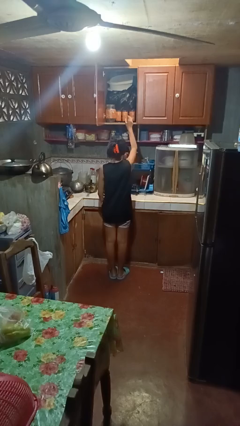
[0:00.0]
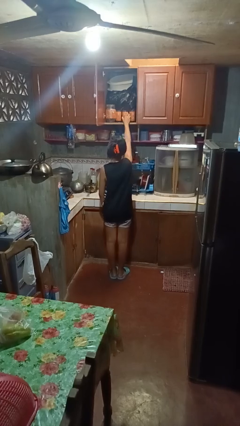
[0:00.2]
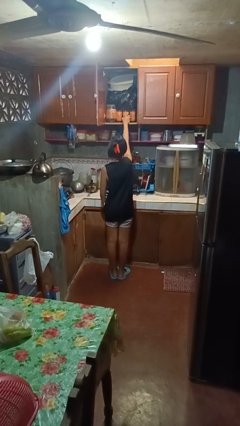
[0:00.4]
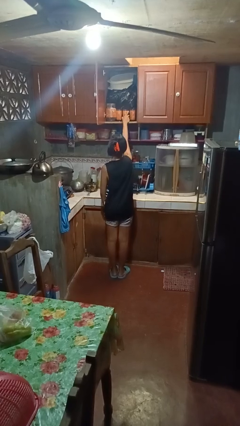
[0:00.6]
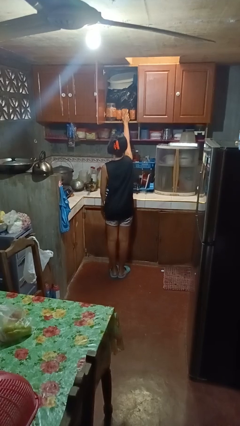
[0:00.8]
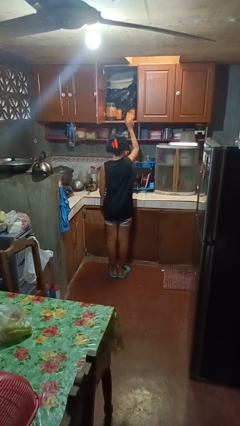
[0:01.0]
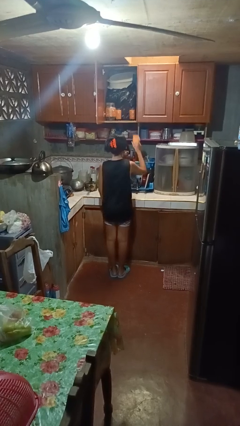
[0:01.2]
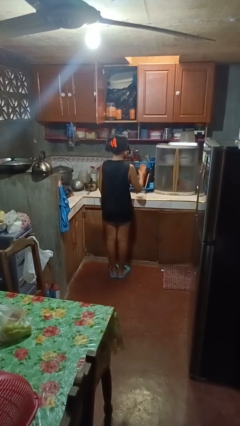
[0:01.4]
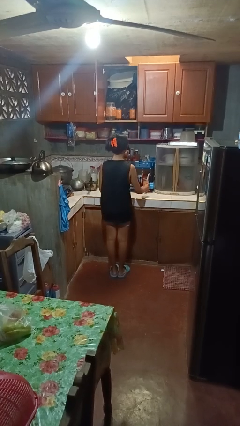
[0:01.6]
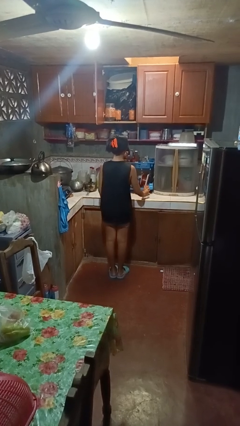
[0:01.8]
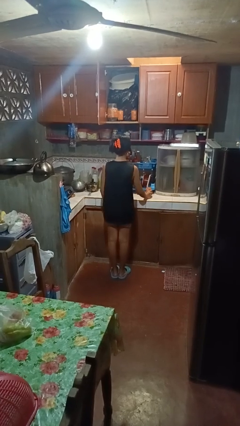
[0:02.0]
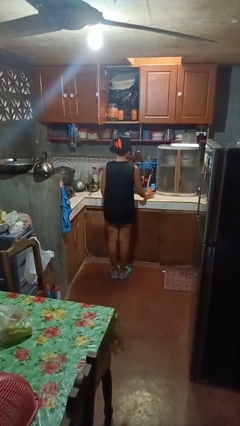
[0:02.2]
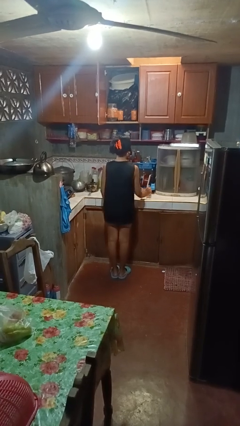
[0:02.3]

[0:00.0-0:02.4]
person takes object from cabinet

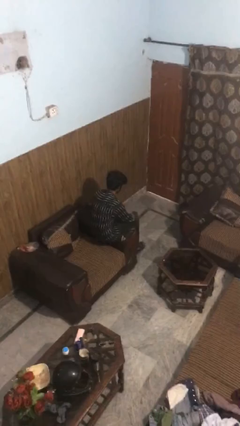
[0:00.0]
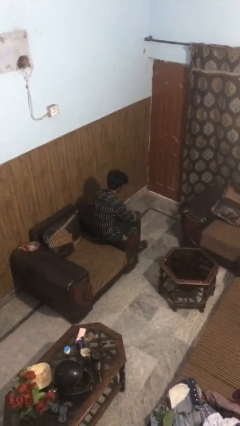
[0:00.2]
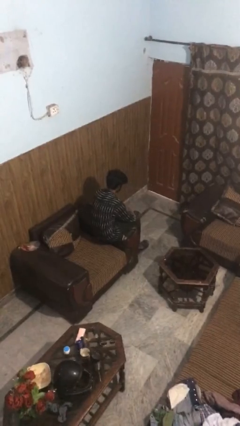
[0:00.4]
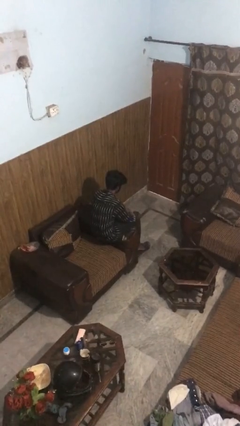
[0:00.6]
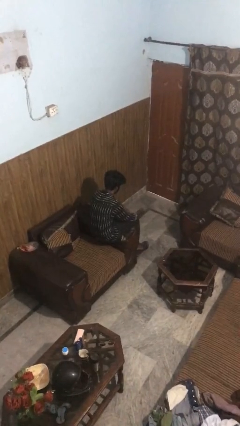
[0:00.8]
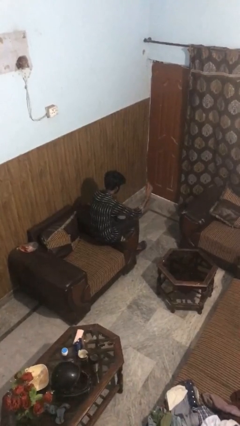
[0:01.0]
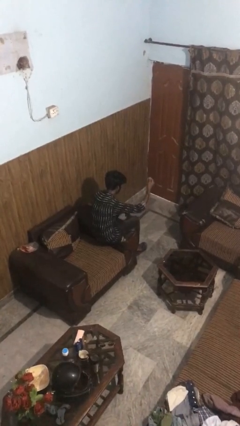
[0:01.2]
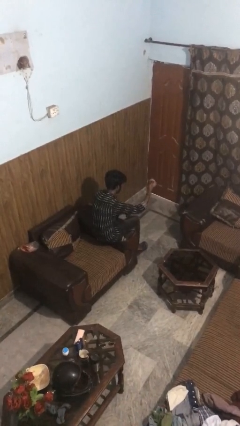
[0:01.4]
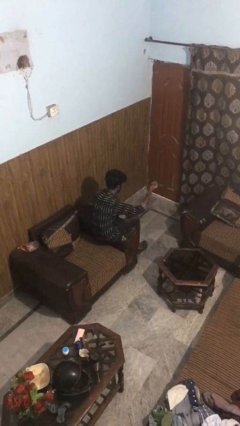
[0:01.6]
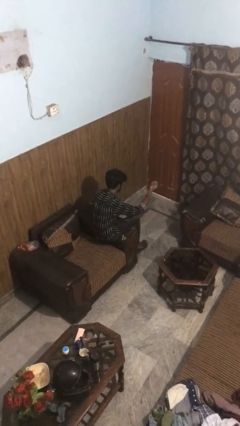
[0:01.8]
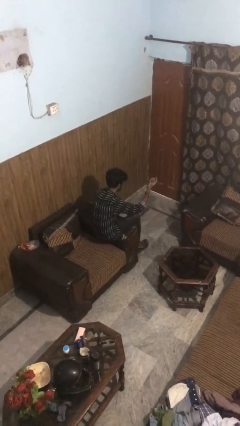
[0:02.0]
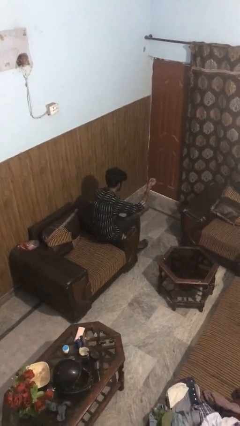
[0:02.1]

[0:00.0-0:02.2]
person snaps fingers

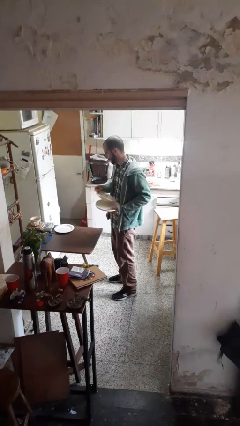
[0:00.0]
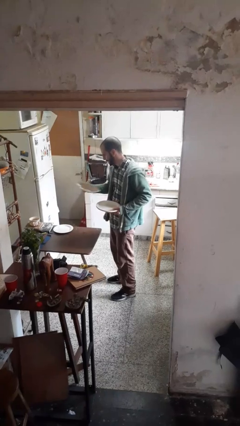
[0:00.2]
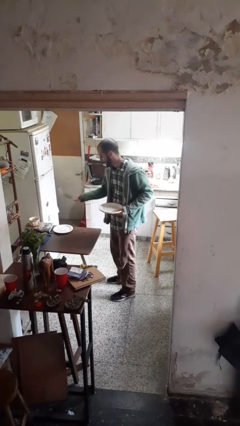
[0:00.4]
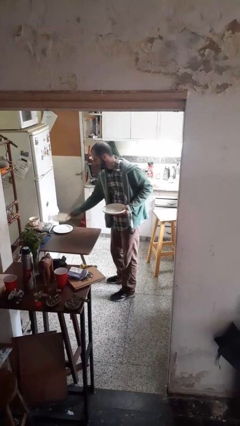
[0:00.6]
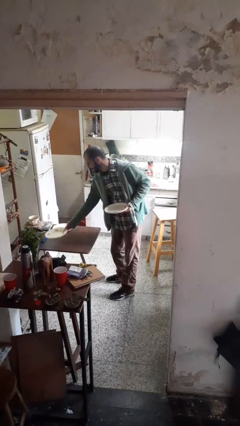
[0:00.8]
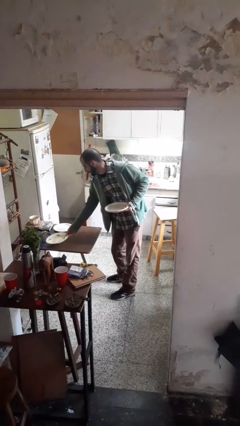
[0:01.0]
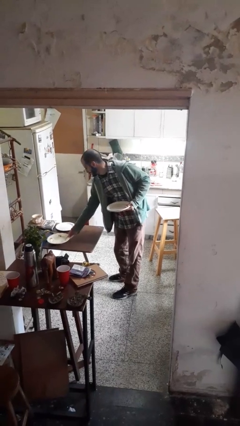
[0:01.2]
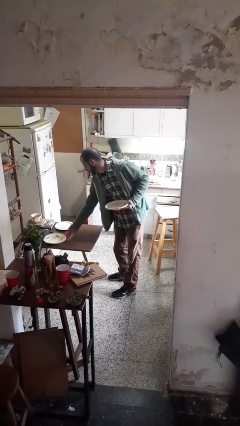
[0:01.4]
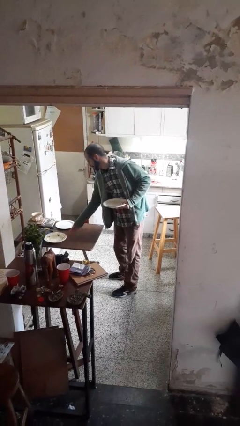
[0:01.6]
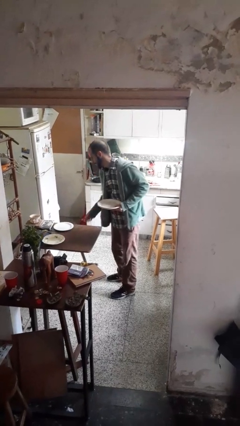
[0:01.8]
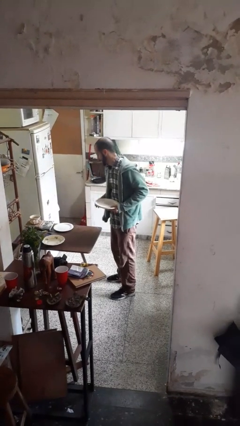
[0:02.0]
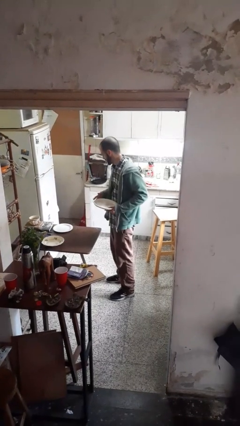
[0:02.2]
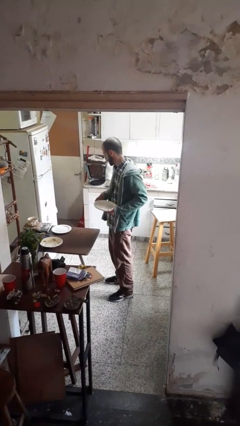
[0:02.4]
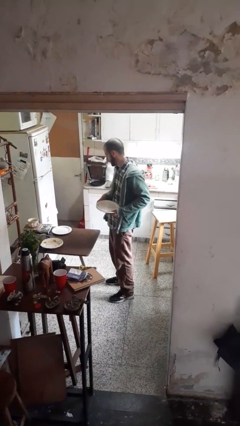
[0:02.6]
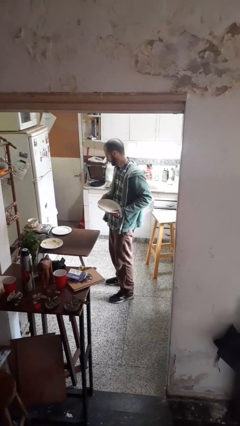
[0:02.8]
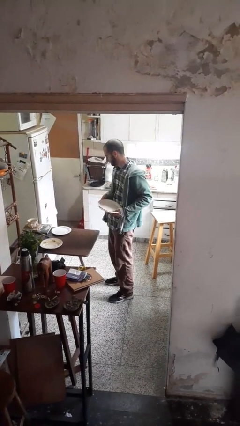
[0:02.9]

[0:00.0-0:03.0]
person sets table

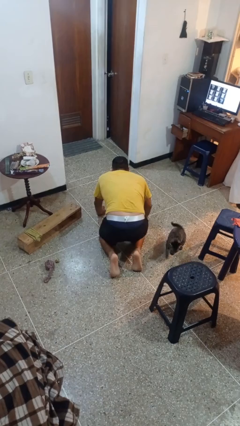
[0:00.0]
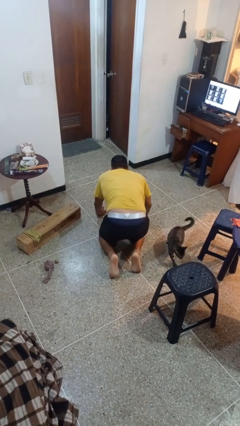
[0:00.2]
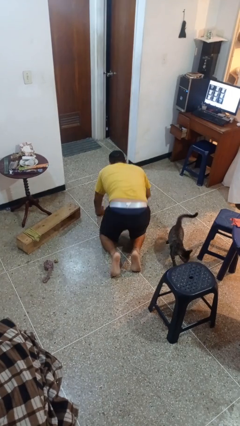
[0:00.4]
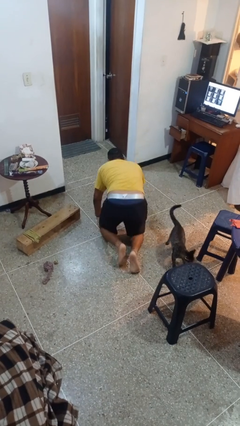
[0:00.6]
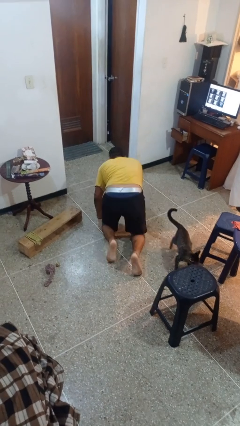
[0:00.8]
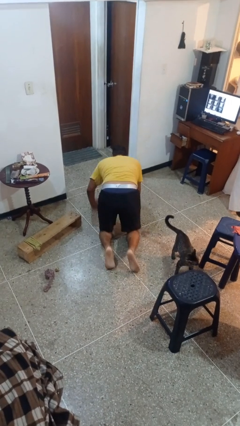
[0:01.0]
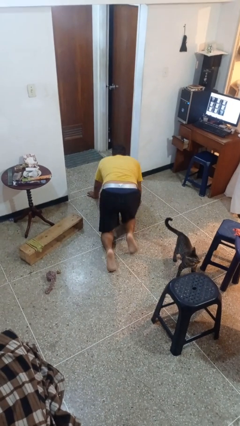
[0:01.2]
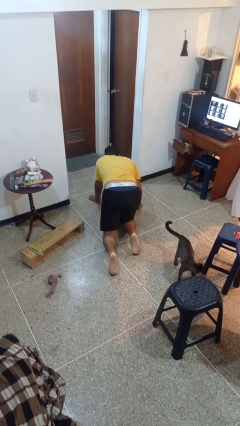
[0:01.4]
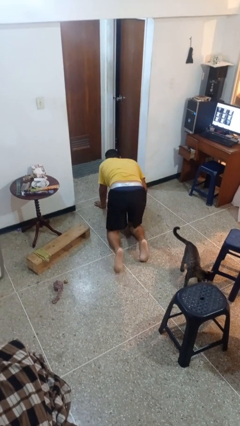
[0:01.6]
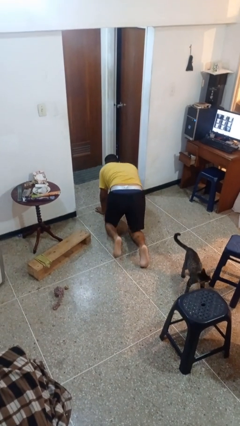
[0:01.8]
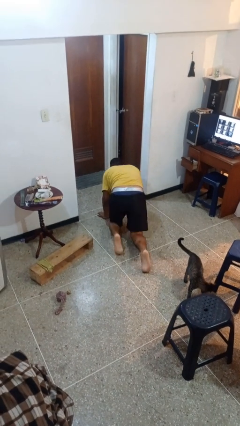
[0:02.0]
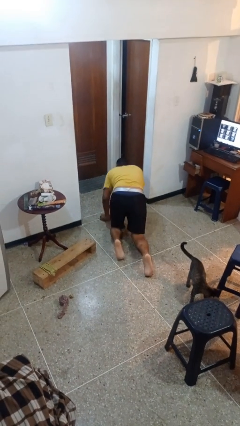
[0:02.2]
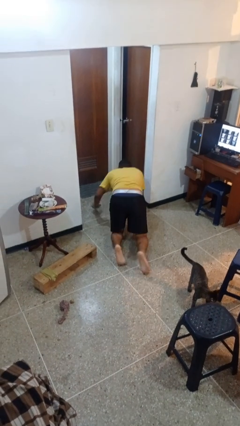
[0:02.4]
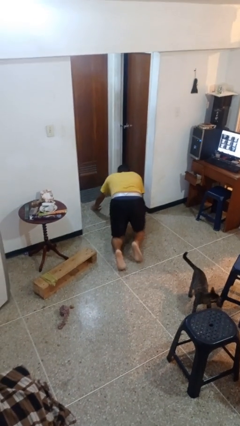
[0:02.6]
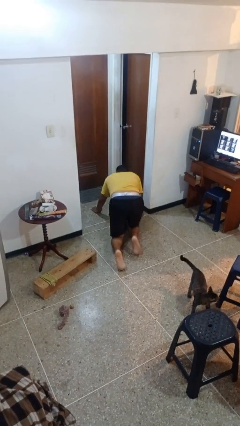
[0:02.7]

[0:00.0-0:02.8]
person crawls

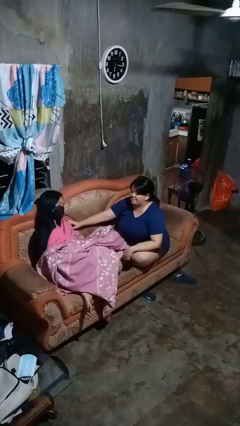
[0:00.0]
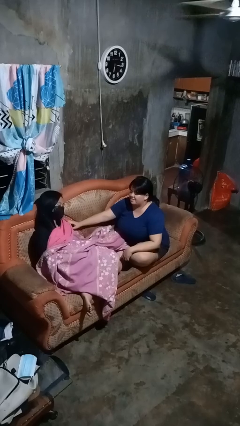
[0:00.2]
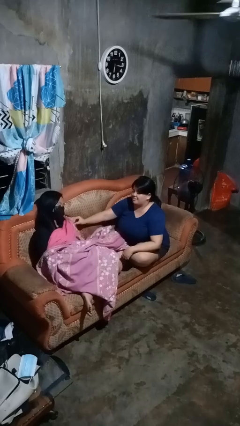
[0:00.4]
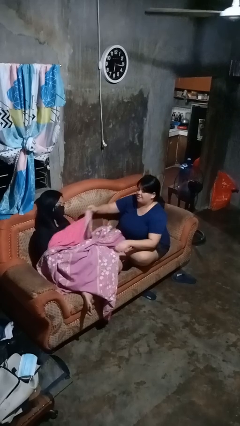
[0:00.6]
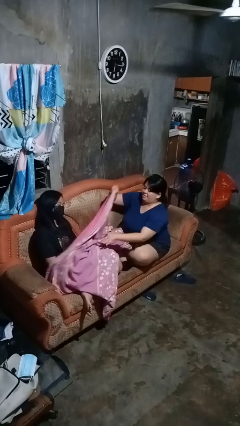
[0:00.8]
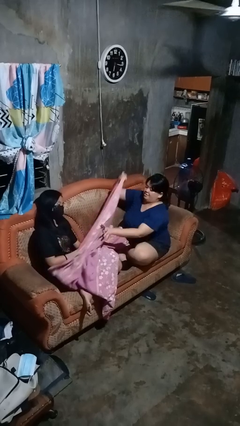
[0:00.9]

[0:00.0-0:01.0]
person uncovers friend with blanket

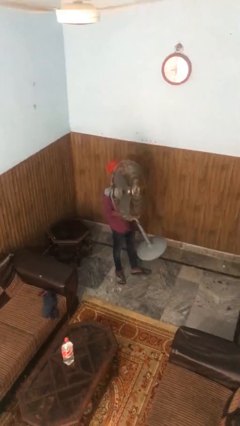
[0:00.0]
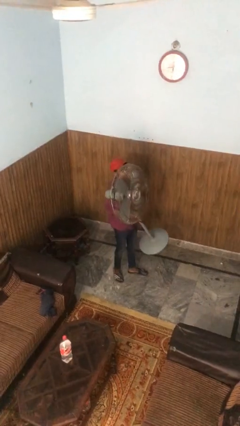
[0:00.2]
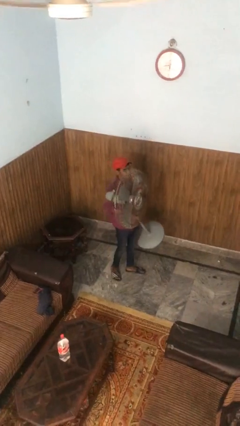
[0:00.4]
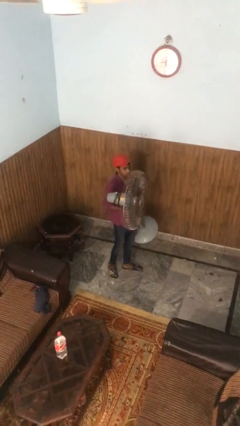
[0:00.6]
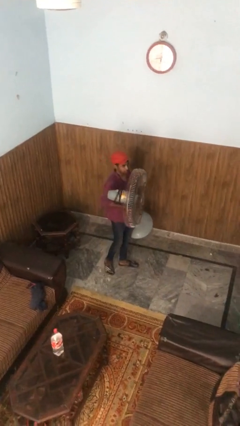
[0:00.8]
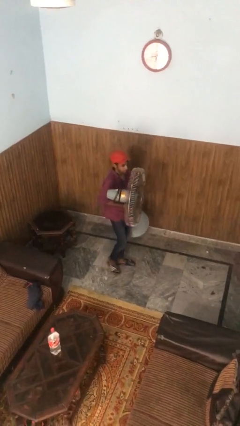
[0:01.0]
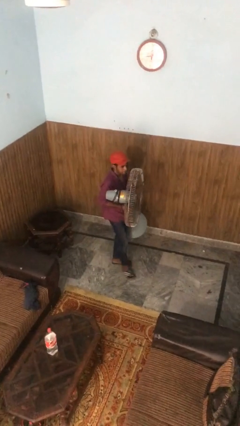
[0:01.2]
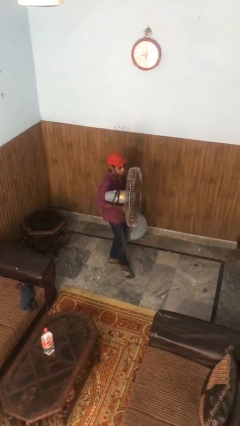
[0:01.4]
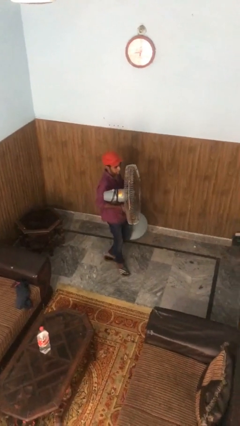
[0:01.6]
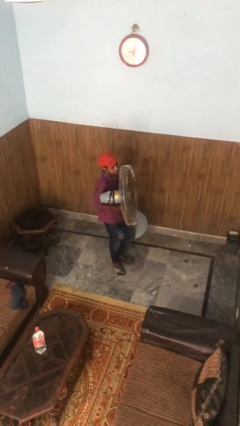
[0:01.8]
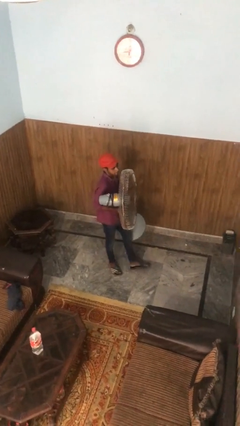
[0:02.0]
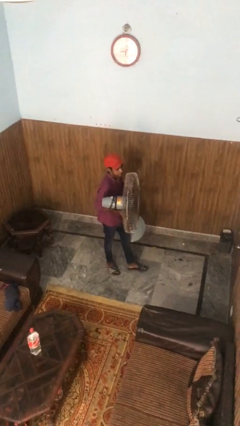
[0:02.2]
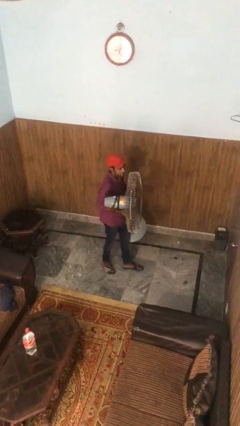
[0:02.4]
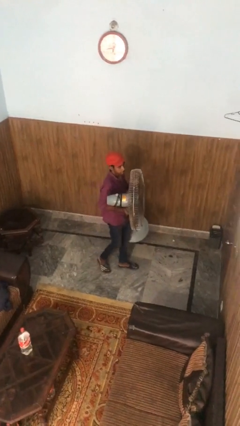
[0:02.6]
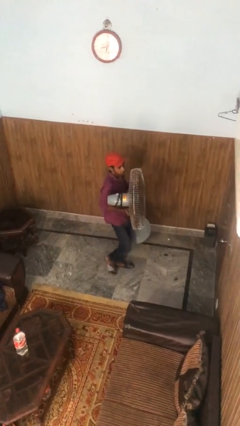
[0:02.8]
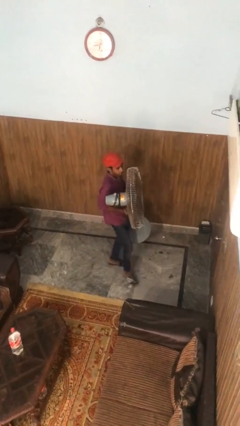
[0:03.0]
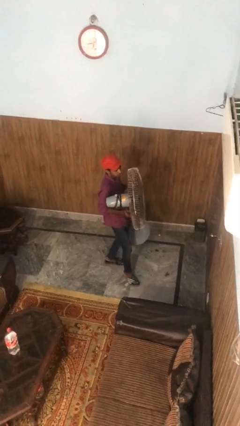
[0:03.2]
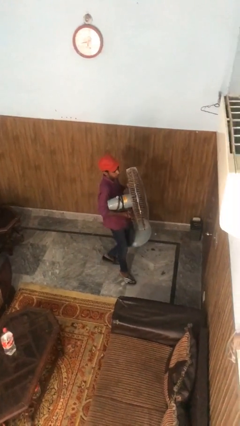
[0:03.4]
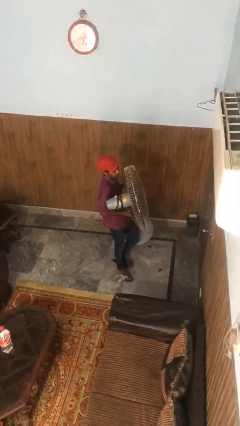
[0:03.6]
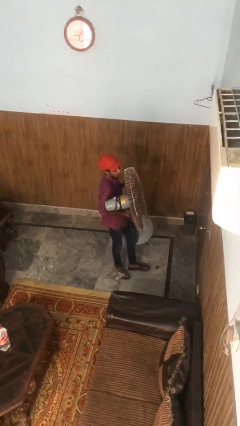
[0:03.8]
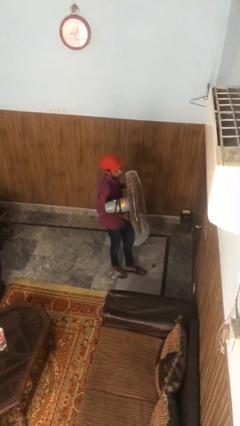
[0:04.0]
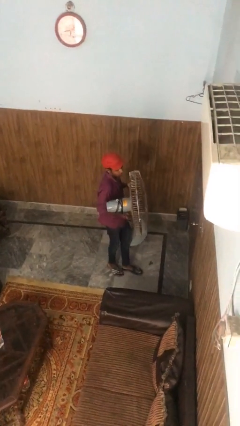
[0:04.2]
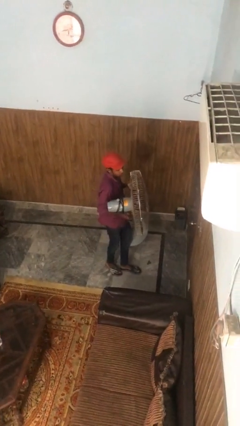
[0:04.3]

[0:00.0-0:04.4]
person carries heavy object

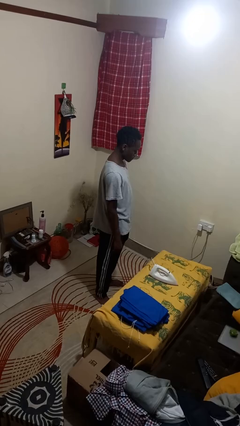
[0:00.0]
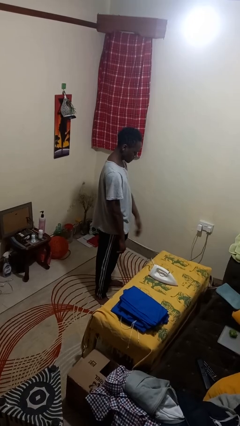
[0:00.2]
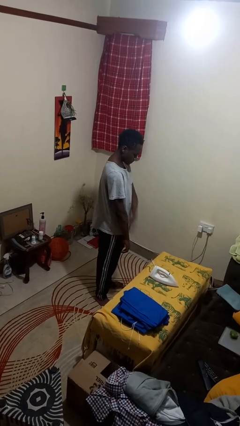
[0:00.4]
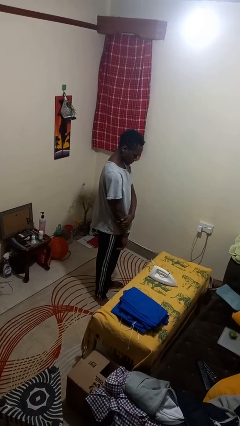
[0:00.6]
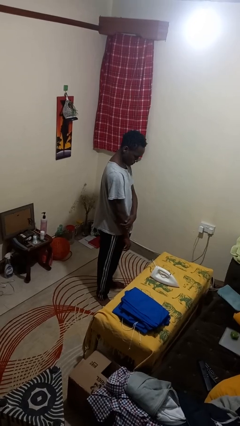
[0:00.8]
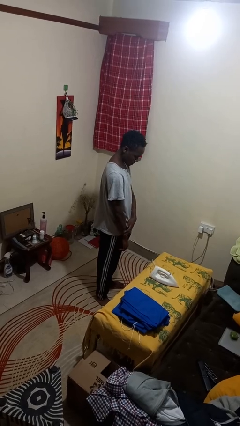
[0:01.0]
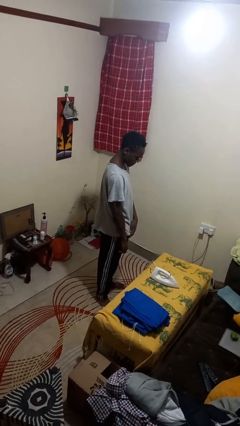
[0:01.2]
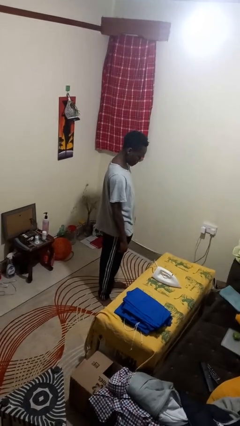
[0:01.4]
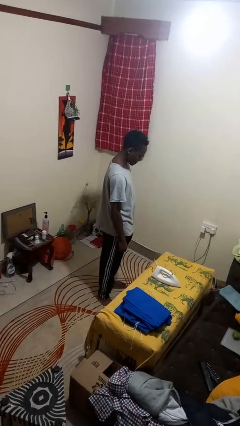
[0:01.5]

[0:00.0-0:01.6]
person swats bug
